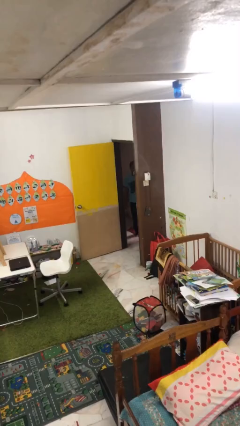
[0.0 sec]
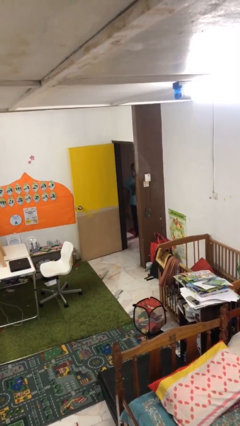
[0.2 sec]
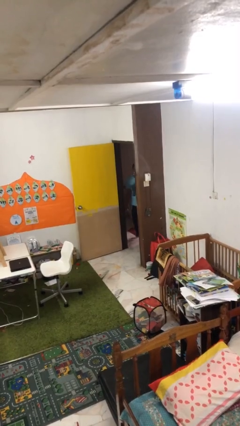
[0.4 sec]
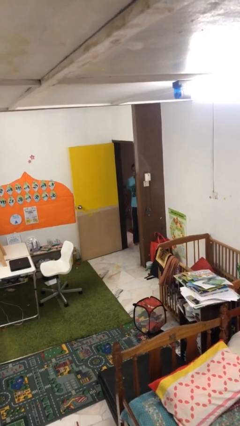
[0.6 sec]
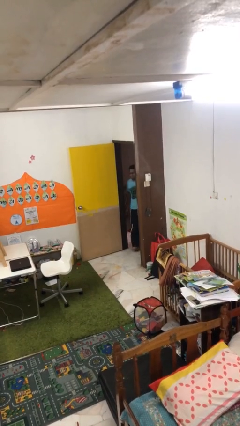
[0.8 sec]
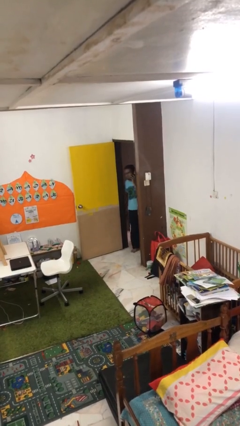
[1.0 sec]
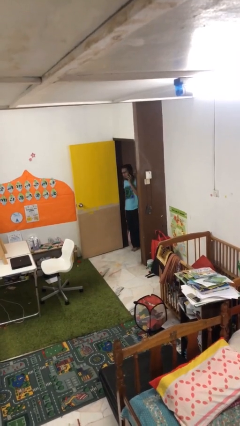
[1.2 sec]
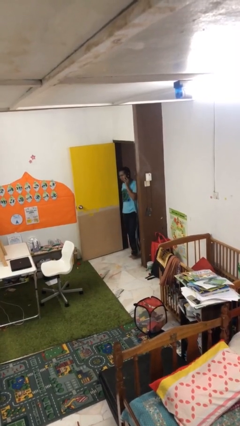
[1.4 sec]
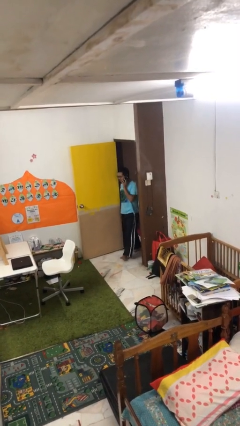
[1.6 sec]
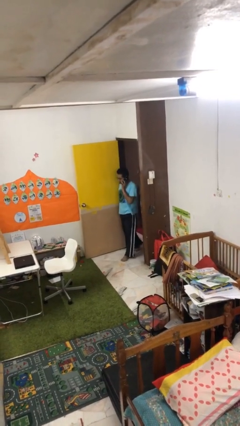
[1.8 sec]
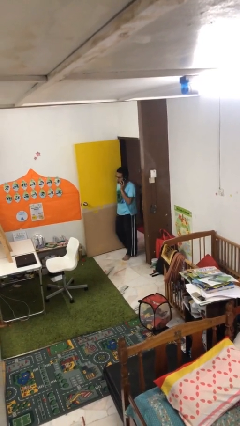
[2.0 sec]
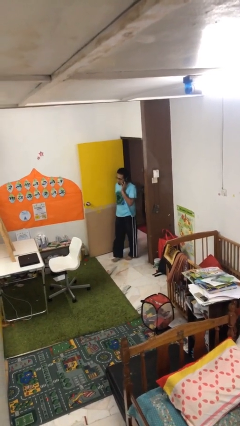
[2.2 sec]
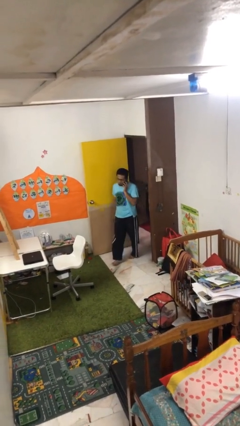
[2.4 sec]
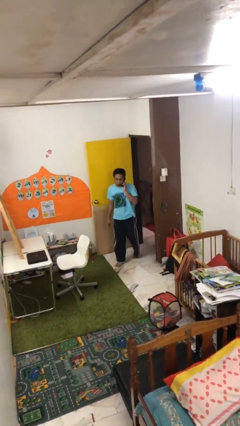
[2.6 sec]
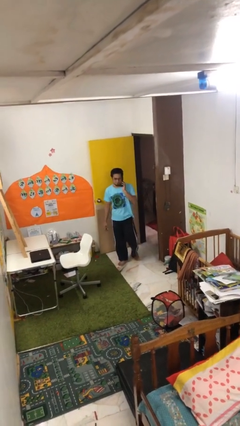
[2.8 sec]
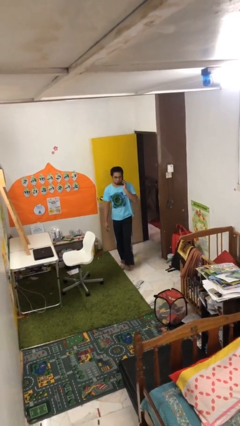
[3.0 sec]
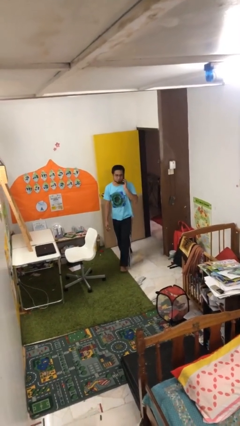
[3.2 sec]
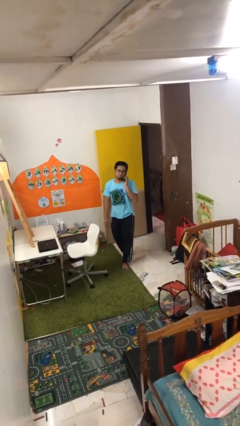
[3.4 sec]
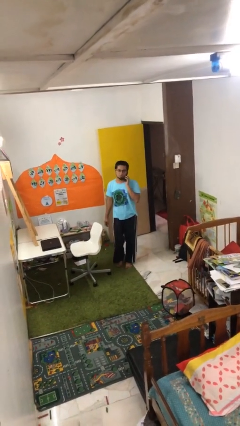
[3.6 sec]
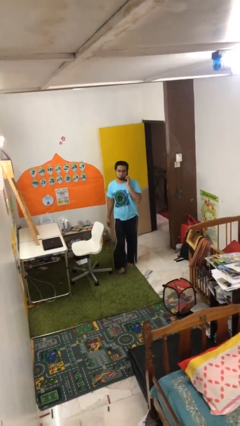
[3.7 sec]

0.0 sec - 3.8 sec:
person enters scene through structure

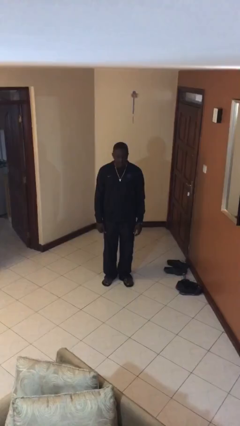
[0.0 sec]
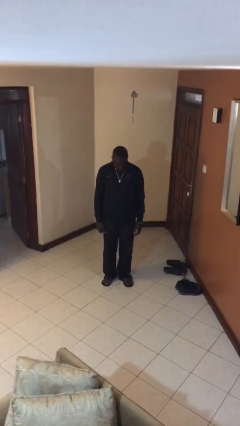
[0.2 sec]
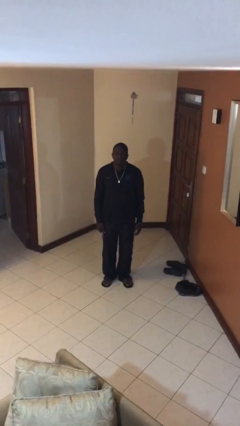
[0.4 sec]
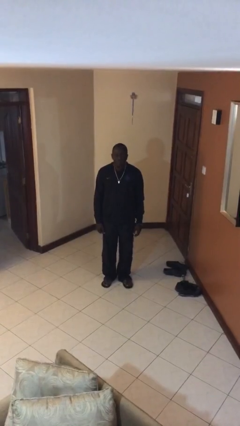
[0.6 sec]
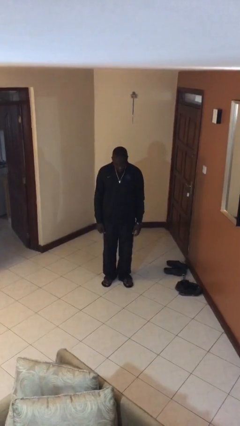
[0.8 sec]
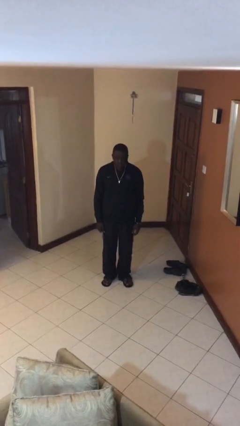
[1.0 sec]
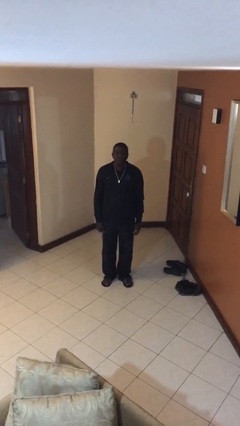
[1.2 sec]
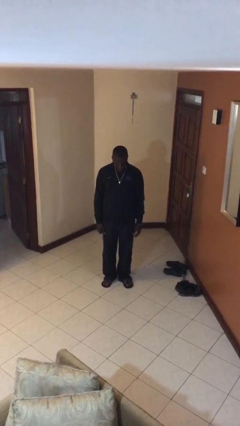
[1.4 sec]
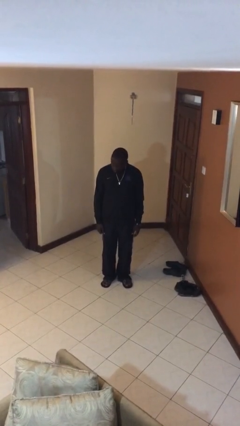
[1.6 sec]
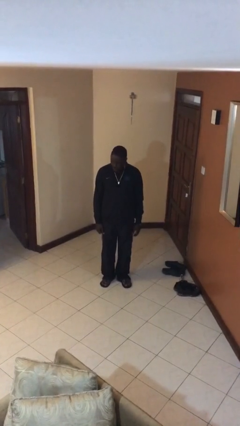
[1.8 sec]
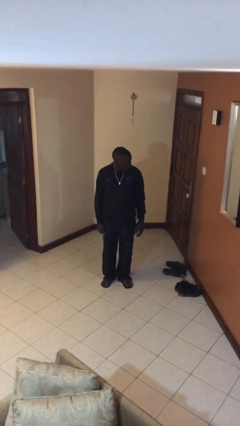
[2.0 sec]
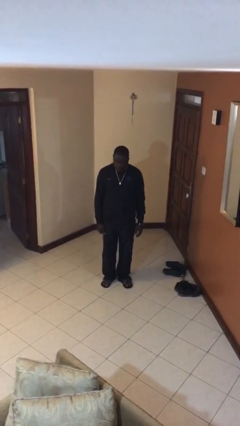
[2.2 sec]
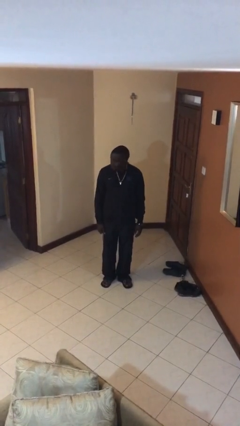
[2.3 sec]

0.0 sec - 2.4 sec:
person nods head

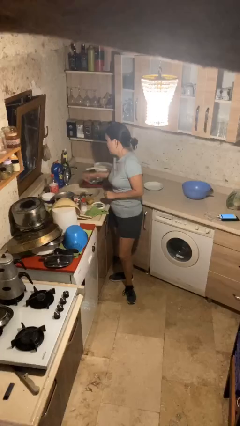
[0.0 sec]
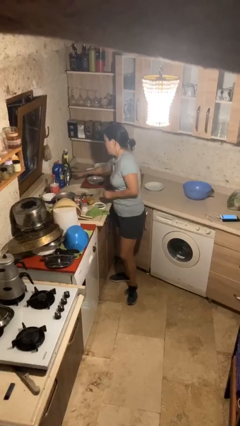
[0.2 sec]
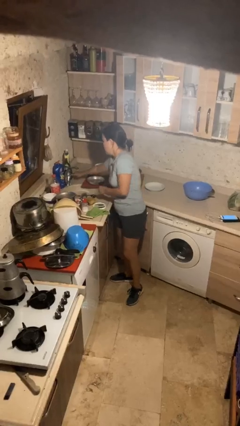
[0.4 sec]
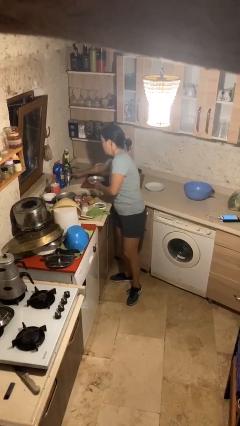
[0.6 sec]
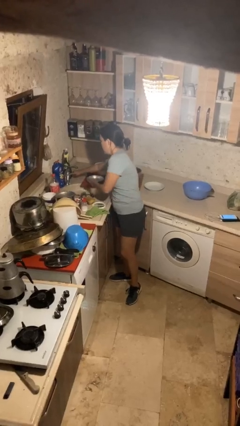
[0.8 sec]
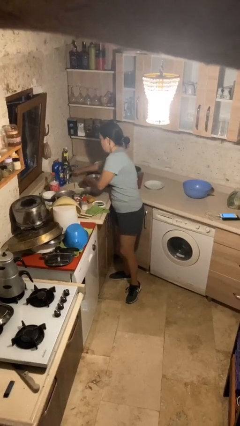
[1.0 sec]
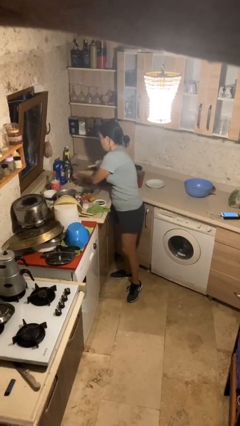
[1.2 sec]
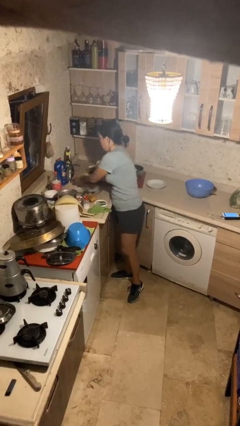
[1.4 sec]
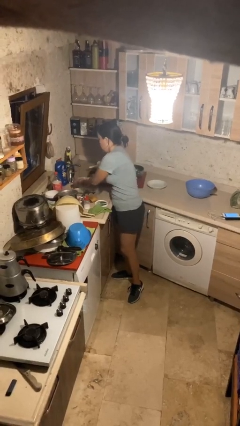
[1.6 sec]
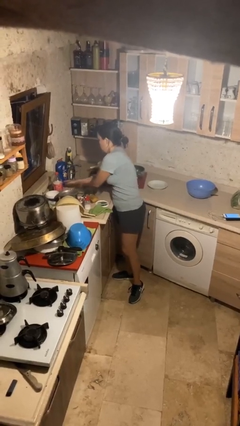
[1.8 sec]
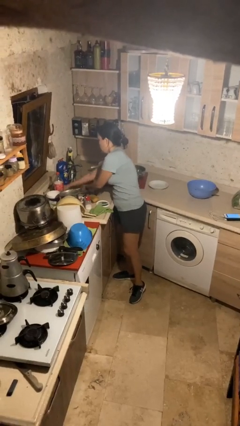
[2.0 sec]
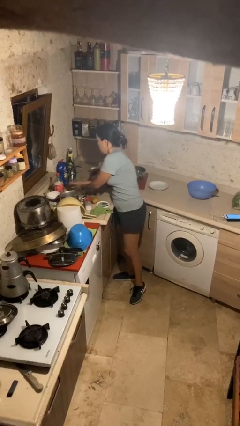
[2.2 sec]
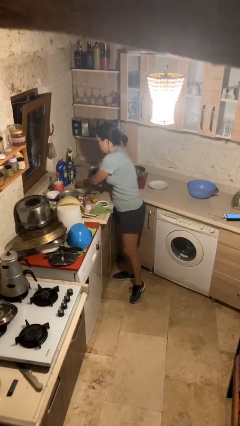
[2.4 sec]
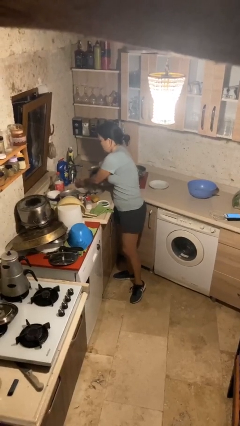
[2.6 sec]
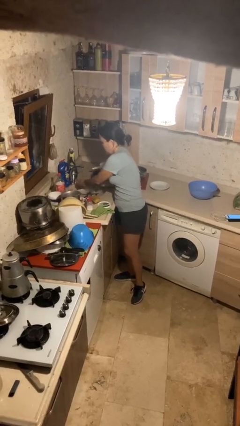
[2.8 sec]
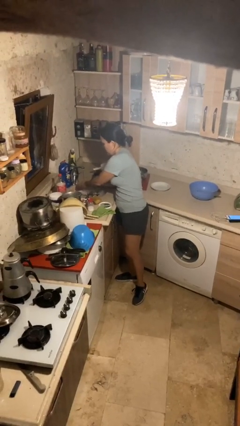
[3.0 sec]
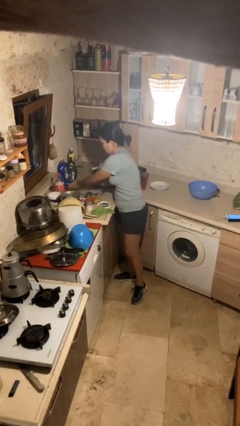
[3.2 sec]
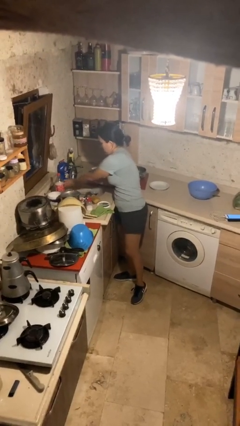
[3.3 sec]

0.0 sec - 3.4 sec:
person washes hands

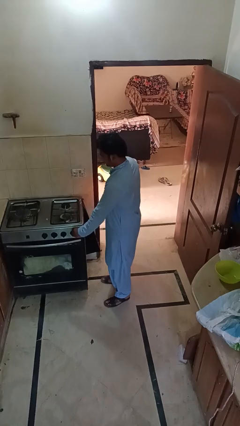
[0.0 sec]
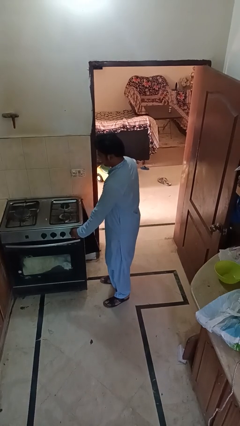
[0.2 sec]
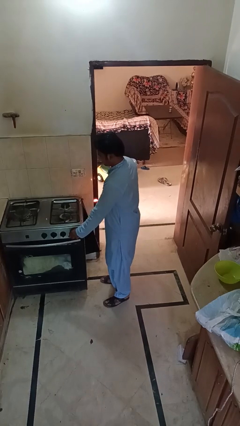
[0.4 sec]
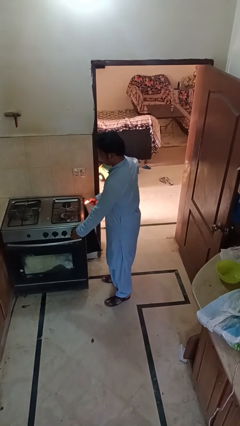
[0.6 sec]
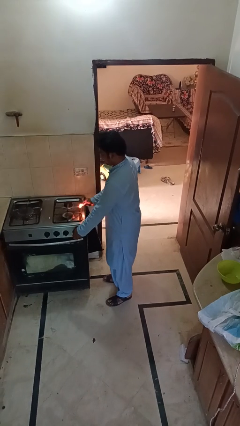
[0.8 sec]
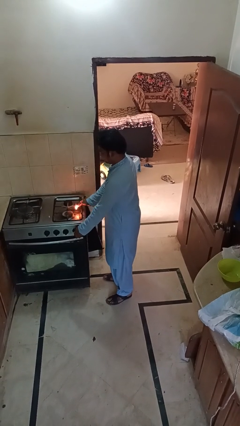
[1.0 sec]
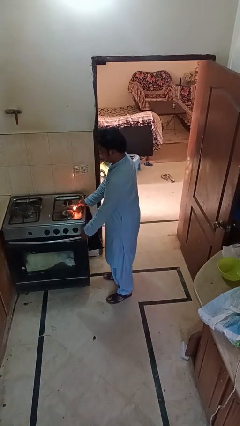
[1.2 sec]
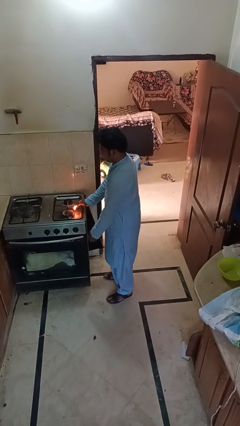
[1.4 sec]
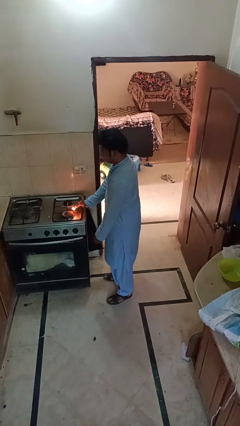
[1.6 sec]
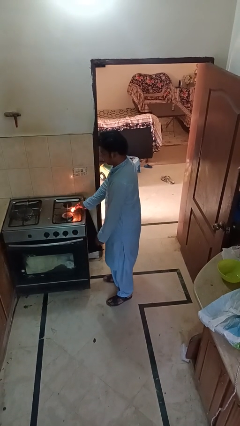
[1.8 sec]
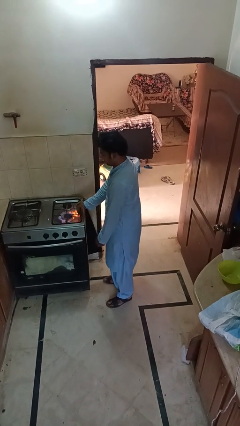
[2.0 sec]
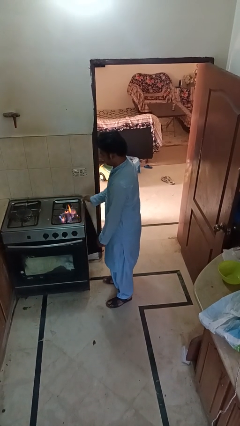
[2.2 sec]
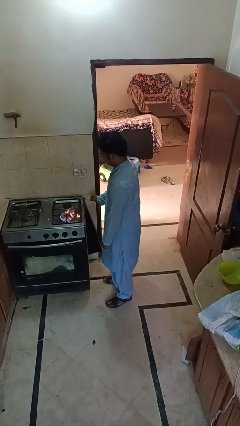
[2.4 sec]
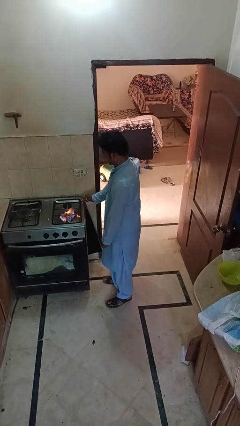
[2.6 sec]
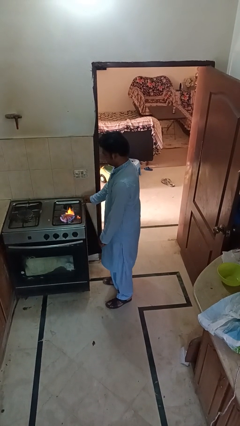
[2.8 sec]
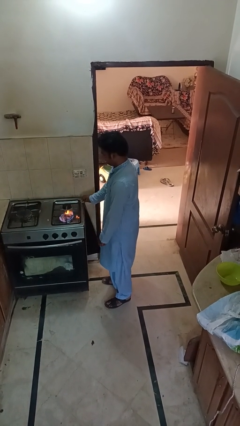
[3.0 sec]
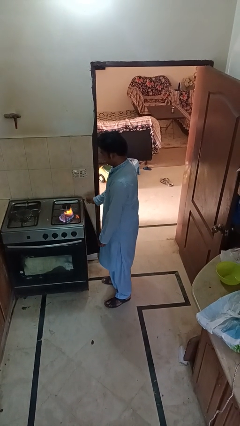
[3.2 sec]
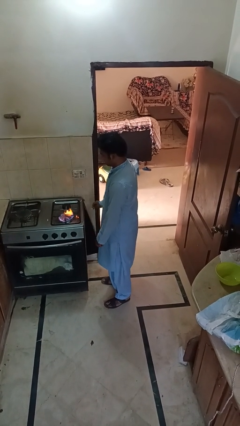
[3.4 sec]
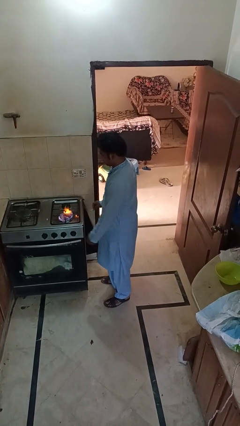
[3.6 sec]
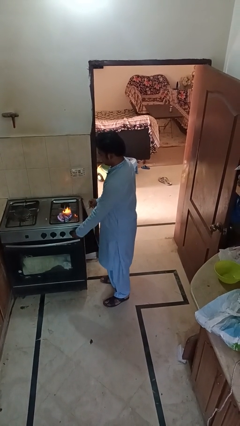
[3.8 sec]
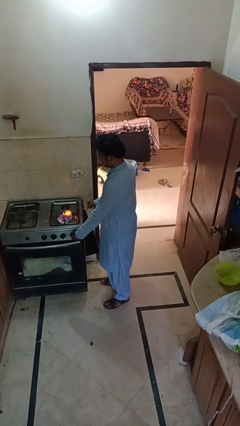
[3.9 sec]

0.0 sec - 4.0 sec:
person turns on stovetop

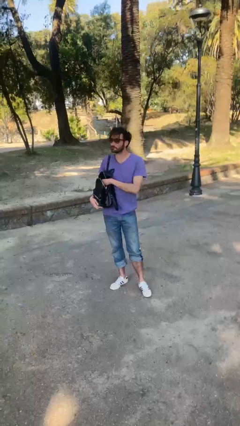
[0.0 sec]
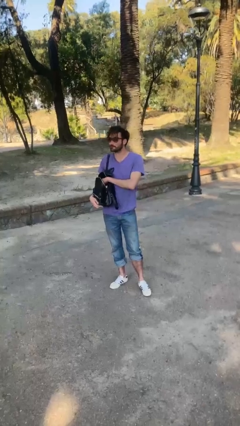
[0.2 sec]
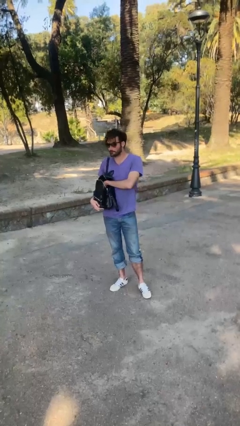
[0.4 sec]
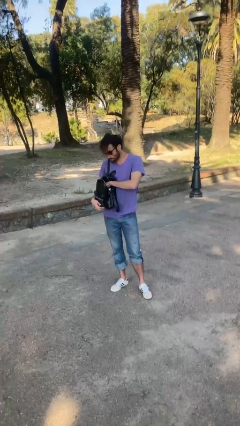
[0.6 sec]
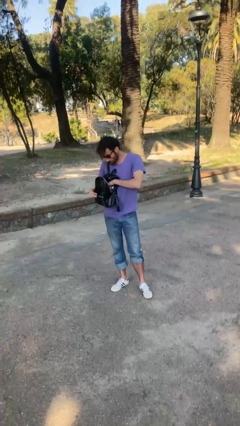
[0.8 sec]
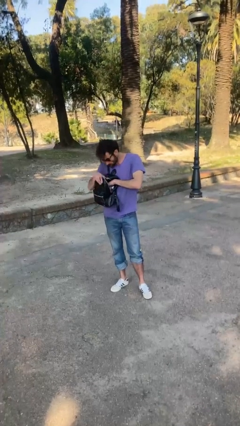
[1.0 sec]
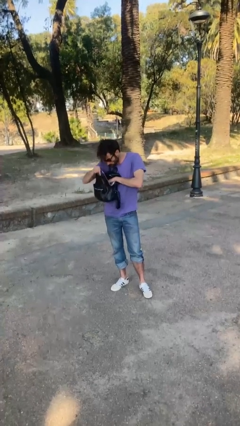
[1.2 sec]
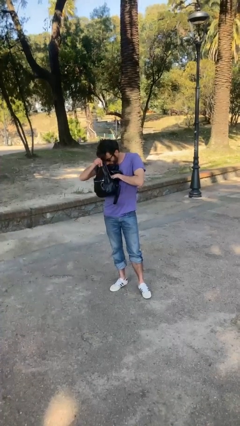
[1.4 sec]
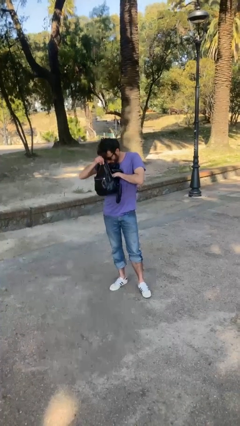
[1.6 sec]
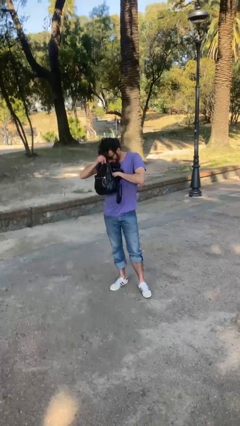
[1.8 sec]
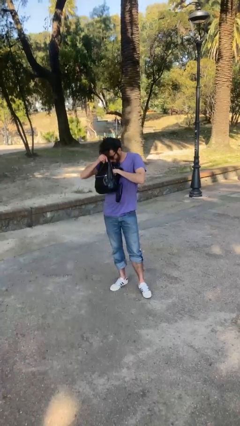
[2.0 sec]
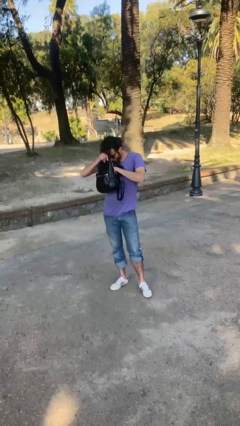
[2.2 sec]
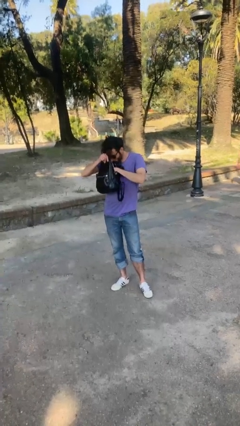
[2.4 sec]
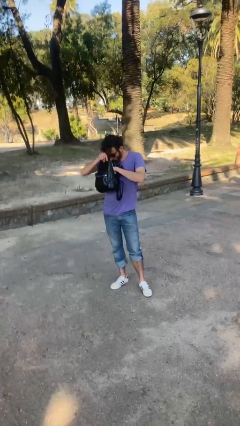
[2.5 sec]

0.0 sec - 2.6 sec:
person searches in purse

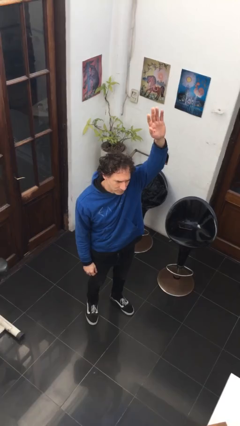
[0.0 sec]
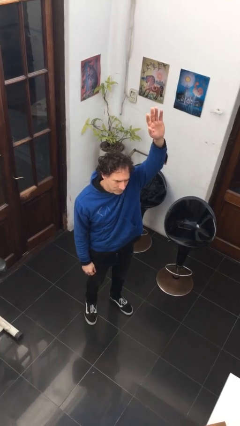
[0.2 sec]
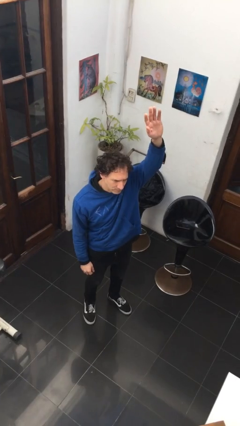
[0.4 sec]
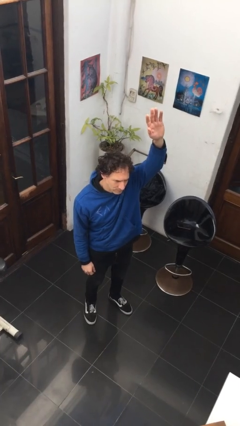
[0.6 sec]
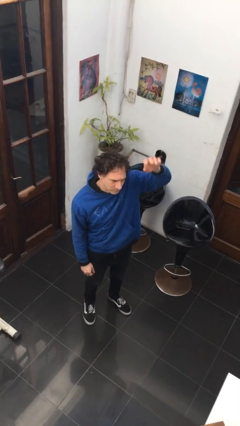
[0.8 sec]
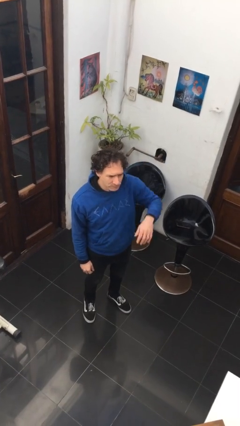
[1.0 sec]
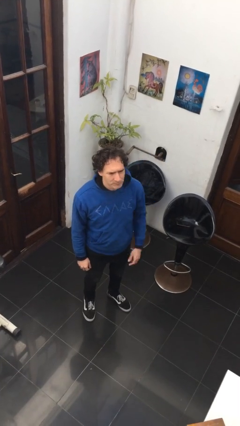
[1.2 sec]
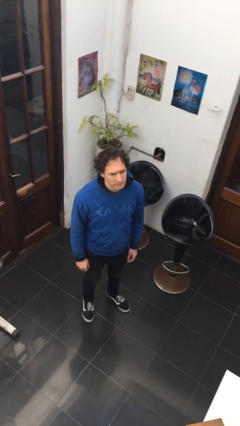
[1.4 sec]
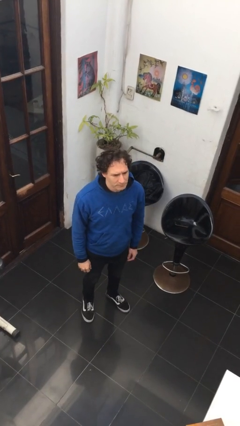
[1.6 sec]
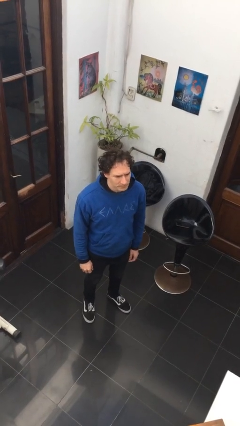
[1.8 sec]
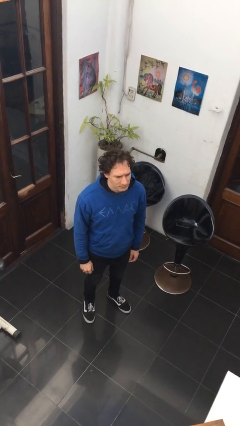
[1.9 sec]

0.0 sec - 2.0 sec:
person gestures lower hand
